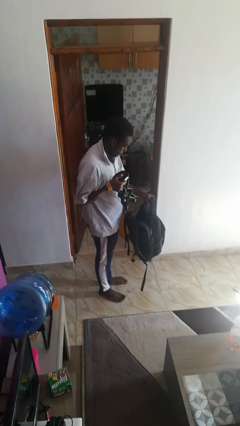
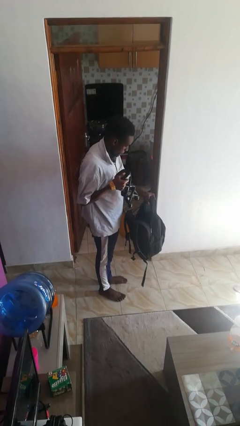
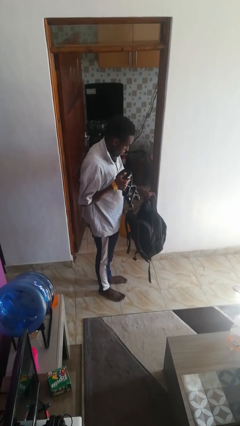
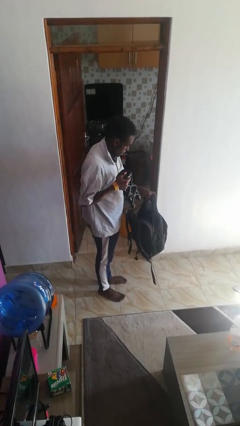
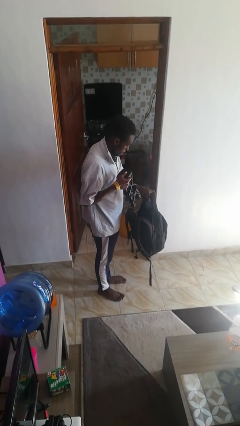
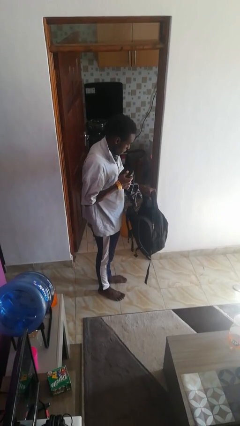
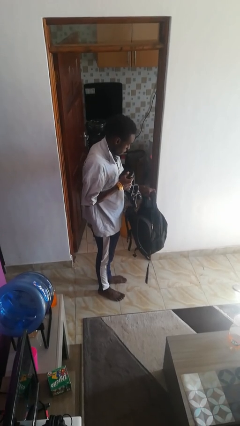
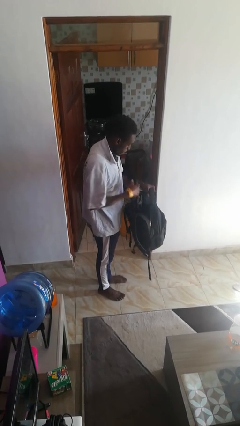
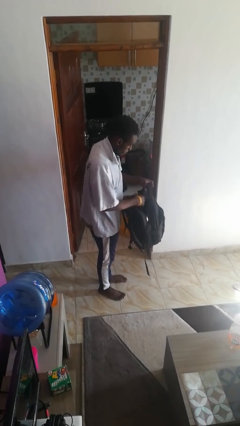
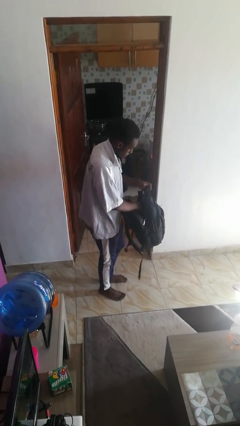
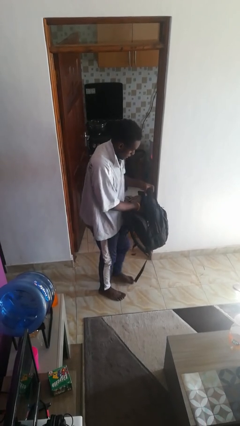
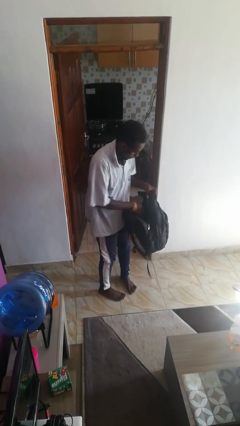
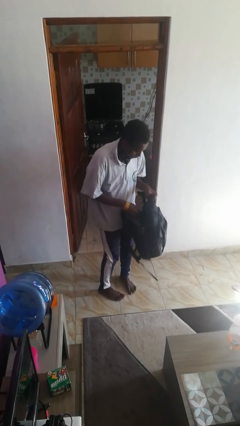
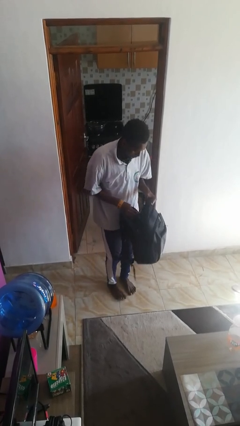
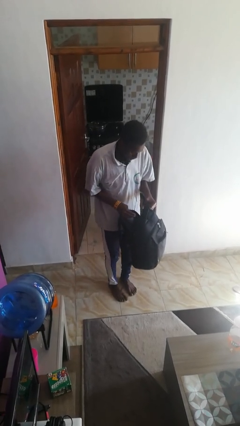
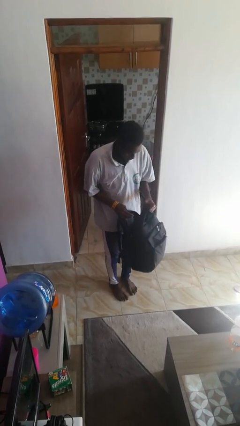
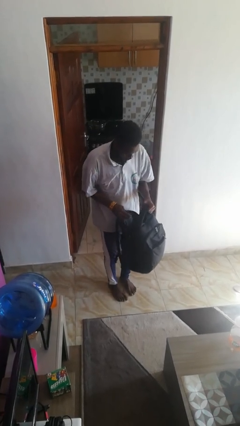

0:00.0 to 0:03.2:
person puts object into backpack

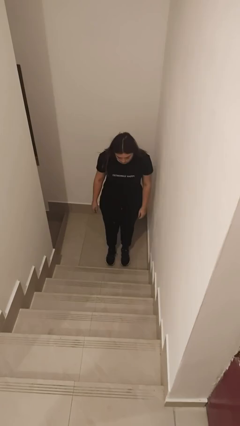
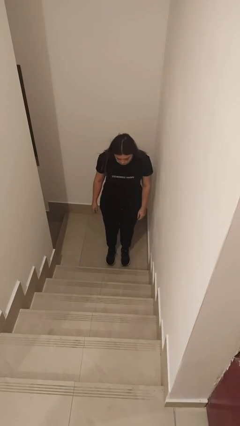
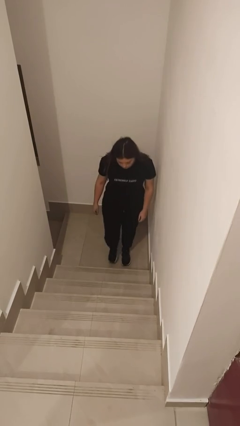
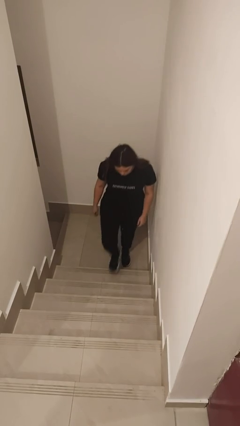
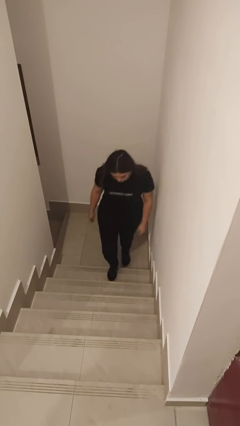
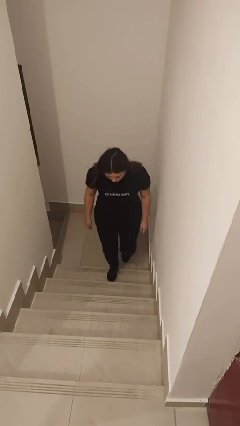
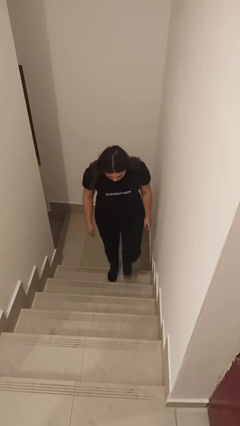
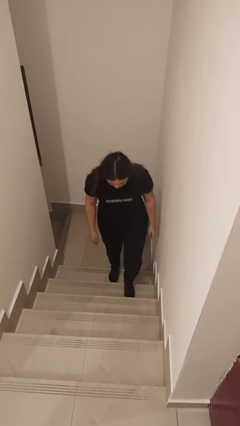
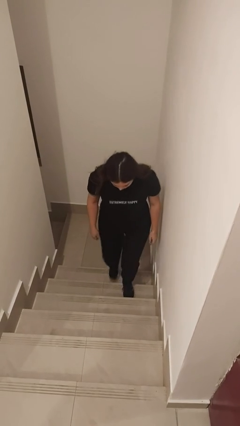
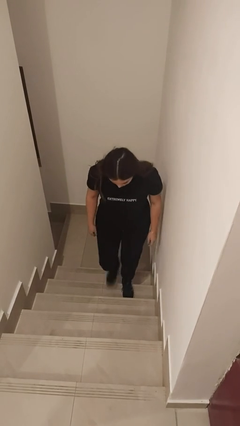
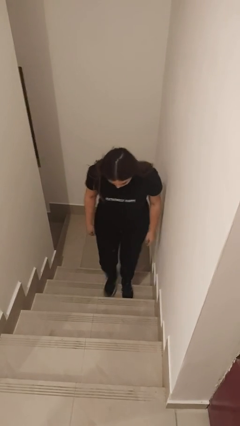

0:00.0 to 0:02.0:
person climbs up stairs

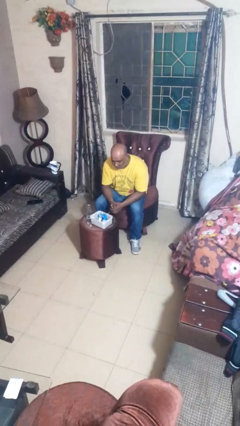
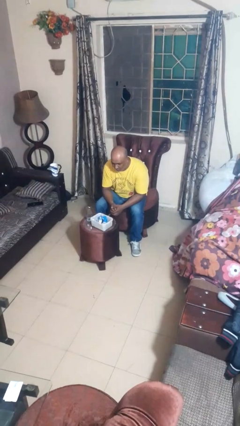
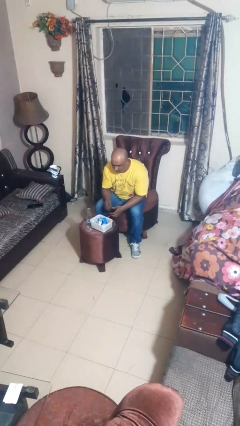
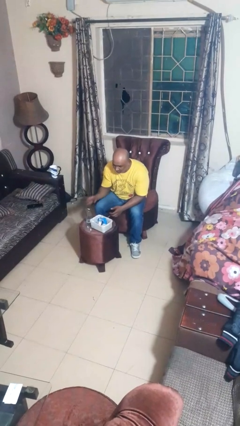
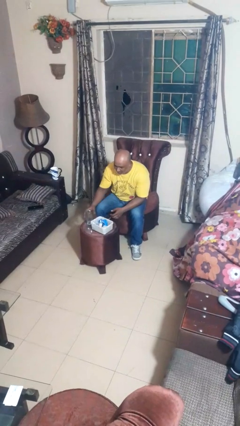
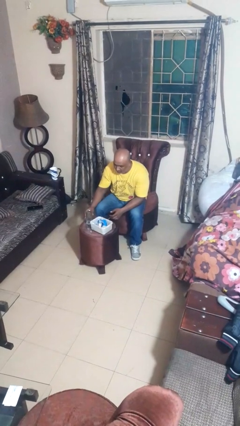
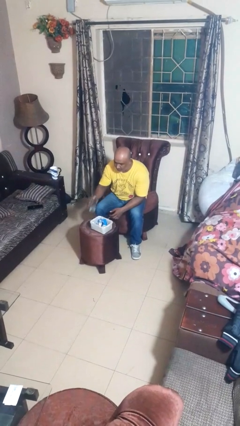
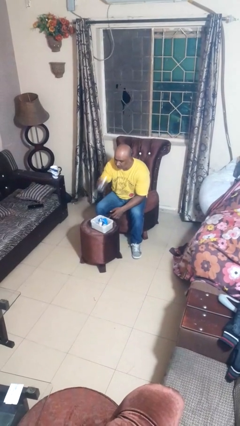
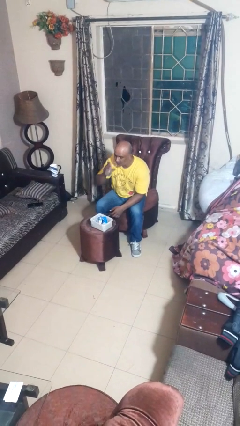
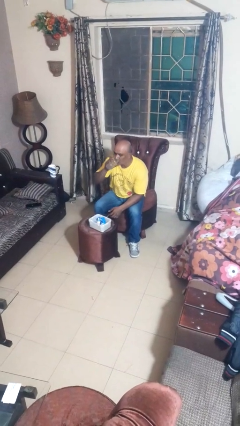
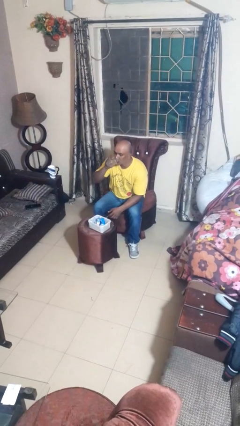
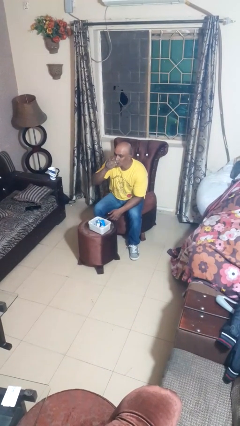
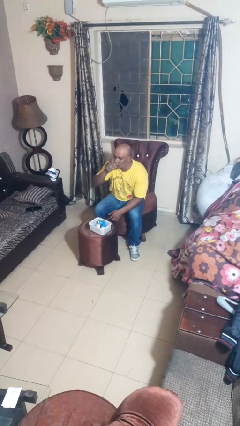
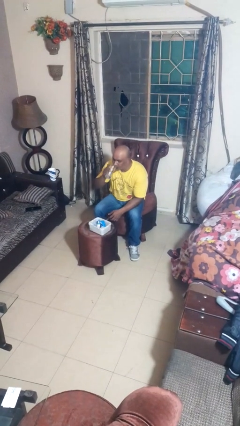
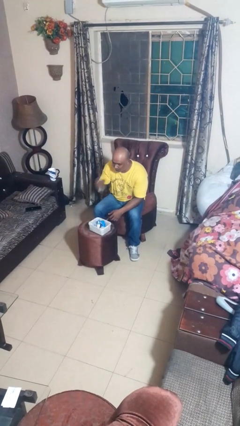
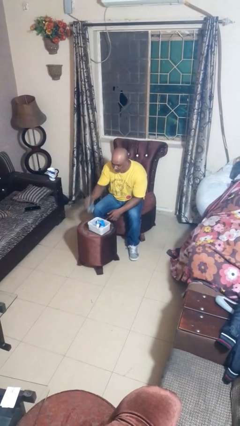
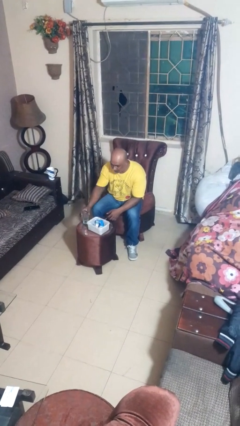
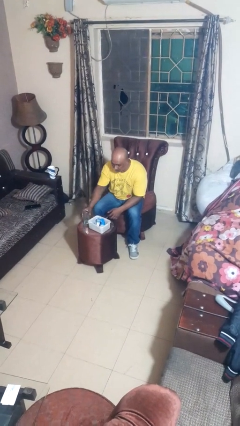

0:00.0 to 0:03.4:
person drinks from cup

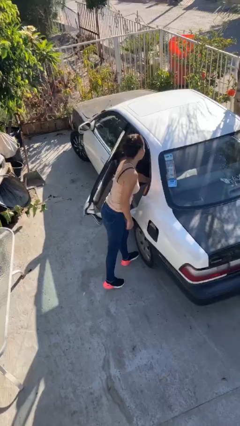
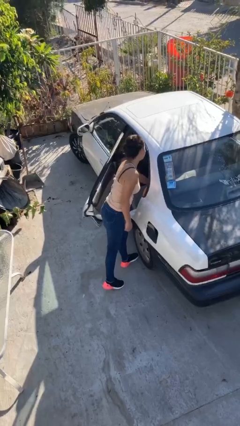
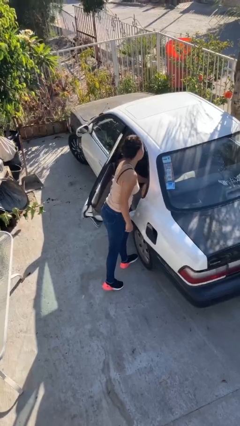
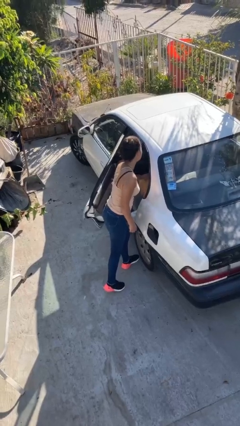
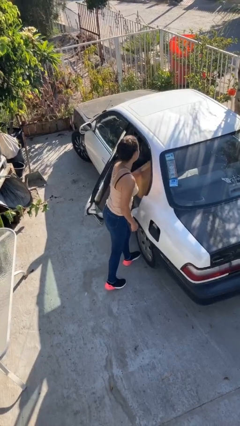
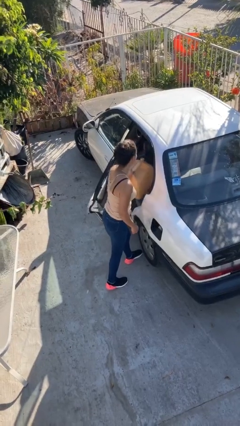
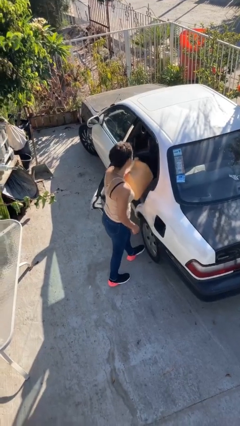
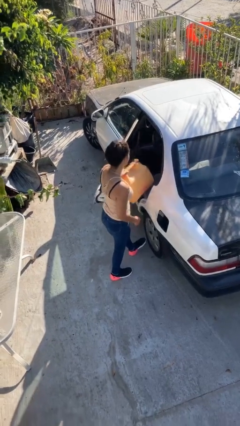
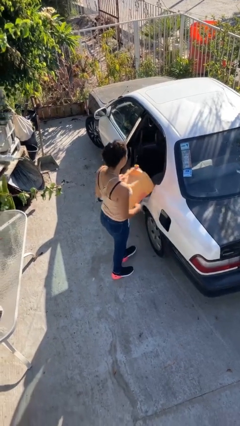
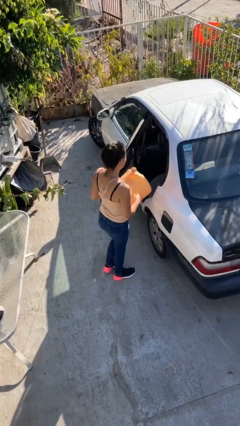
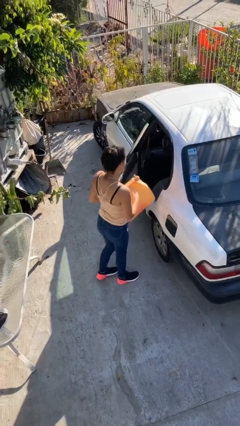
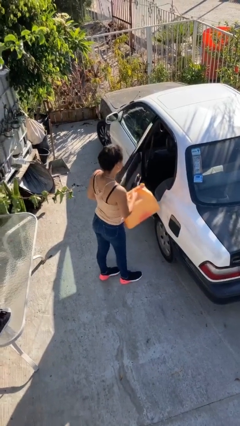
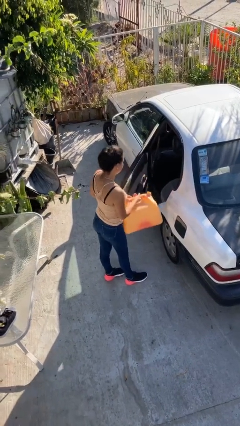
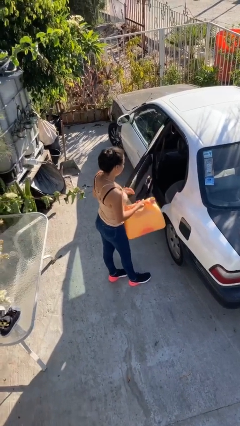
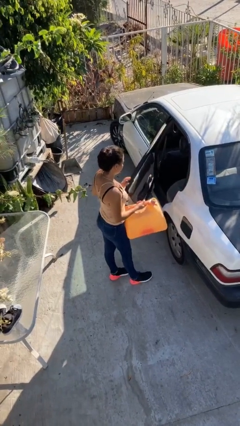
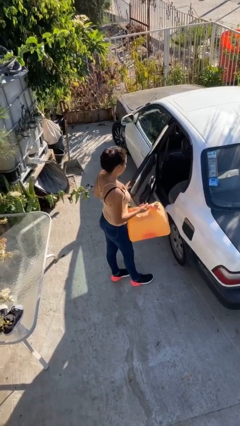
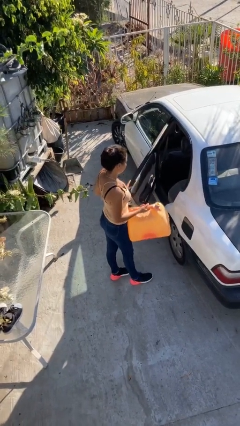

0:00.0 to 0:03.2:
person unloads car

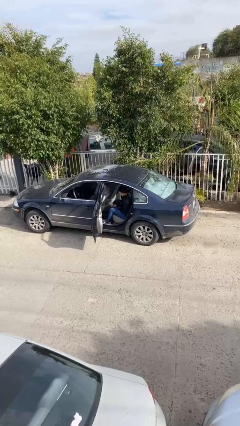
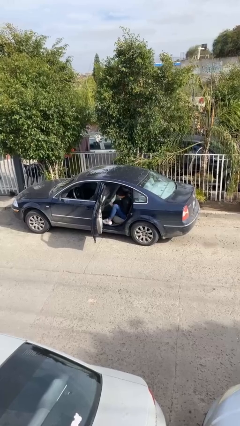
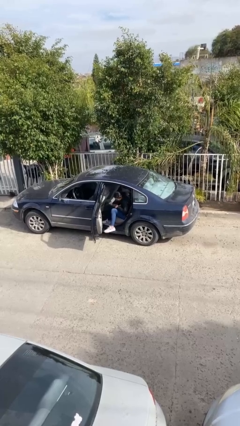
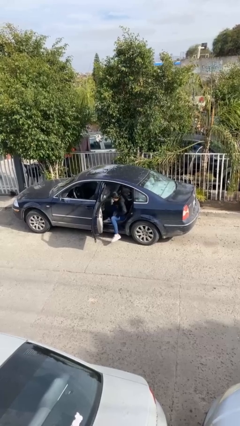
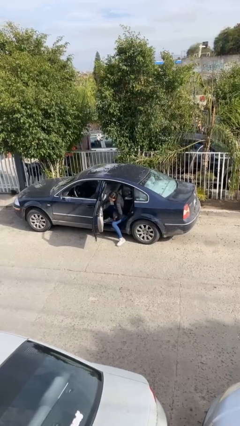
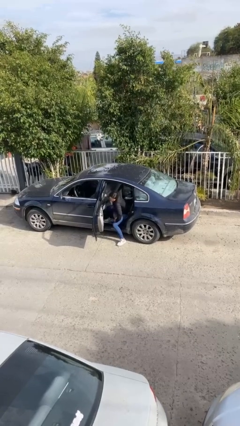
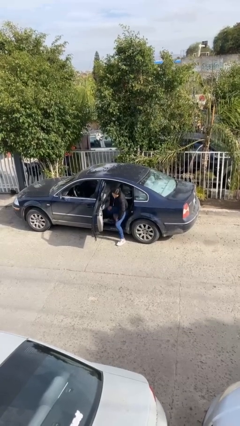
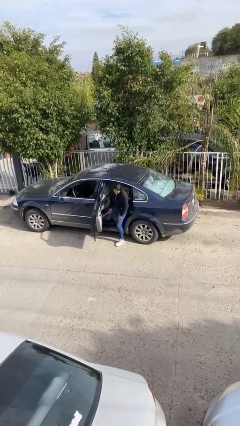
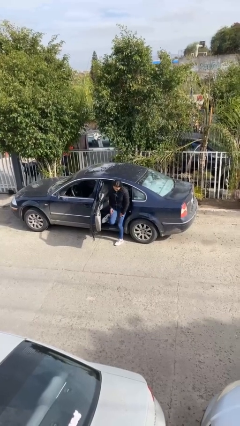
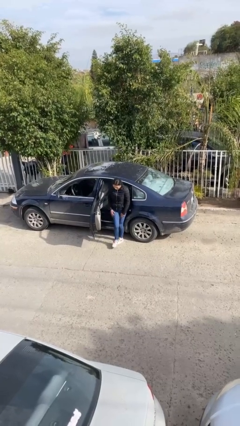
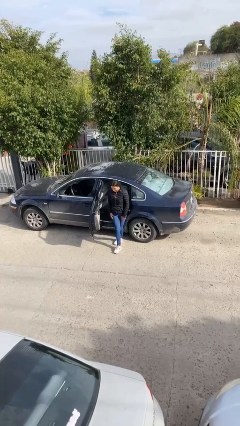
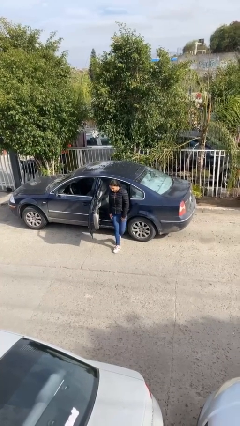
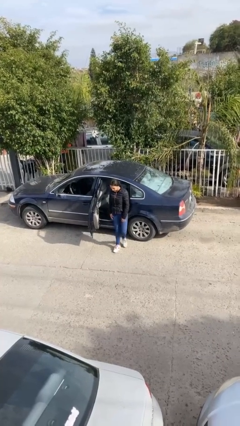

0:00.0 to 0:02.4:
person exits car

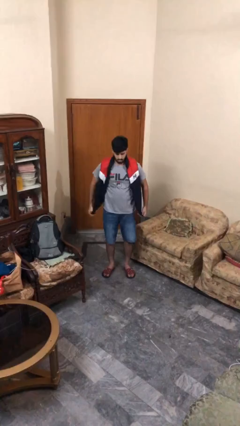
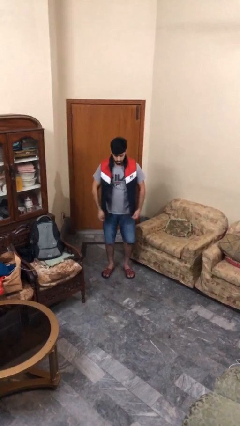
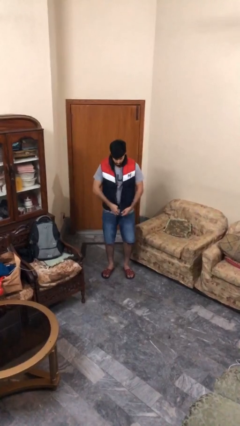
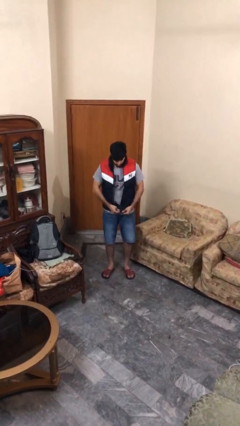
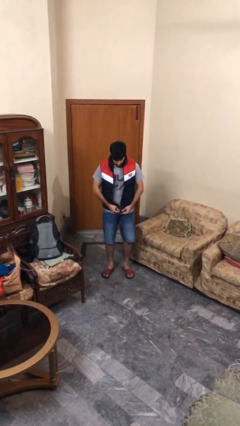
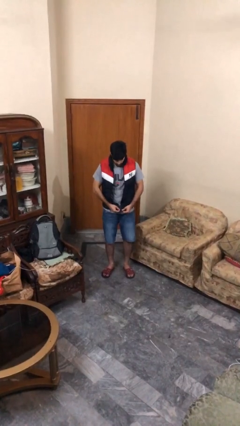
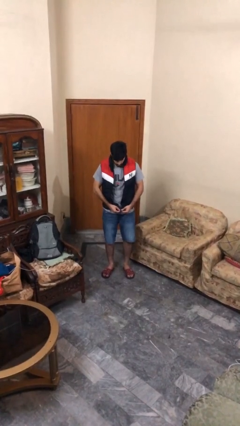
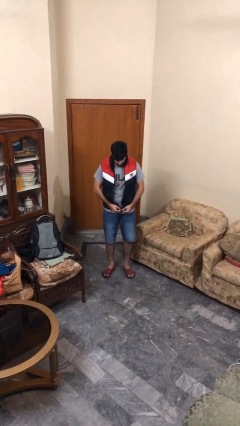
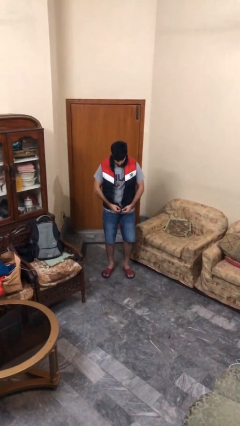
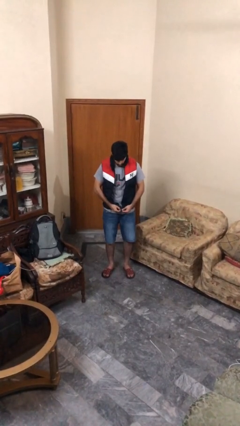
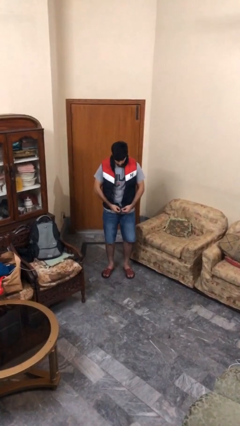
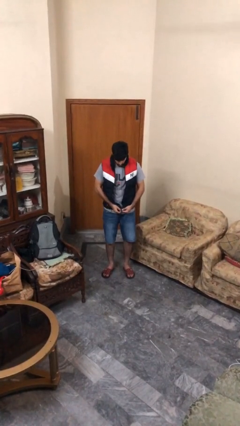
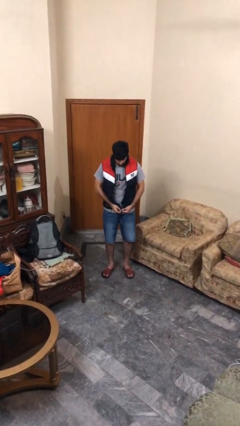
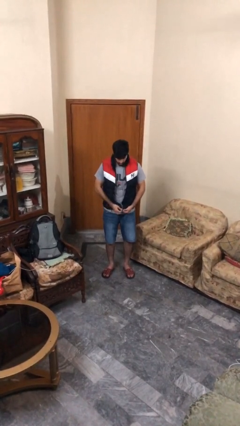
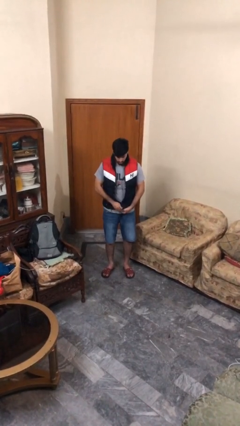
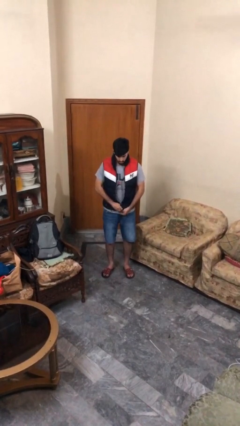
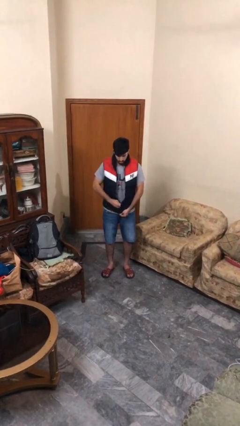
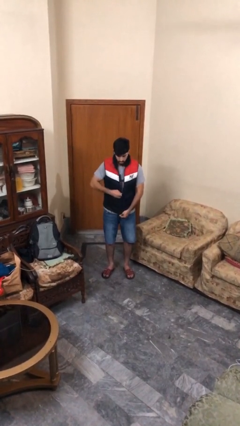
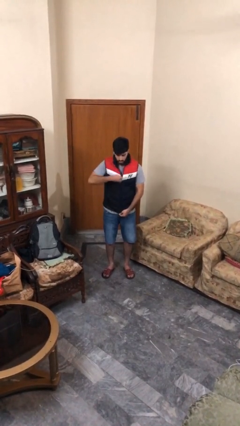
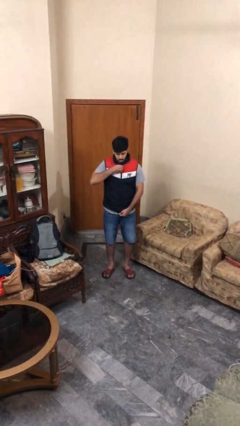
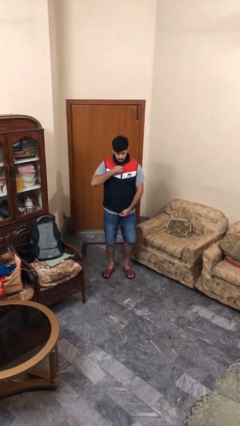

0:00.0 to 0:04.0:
person zips up jacket
